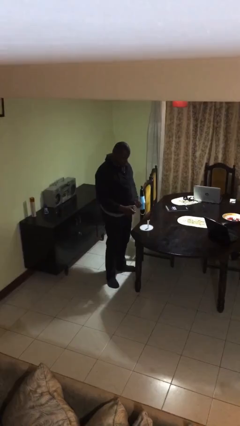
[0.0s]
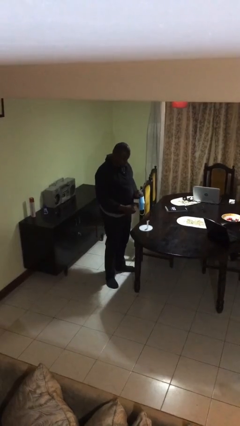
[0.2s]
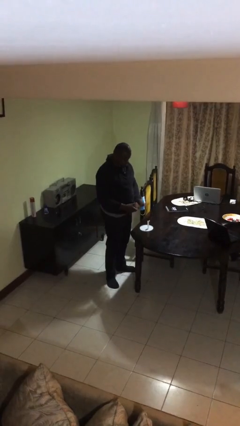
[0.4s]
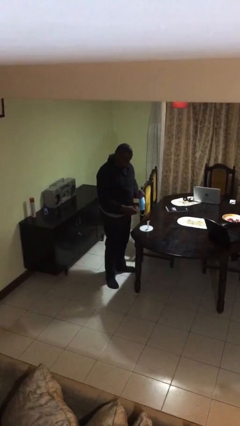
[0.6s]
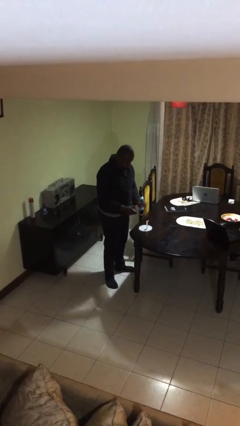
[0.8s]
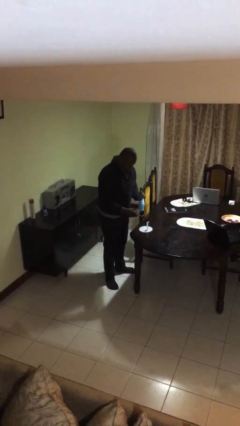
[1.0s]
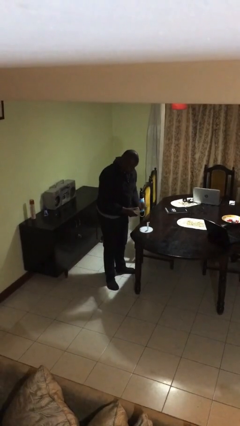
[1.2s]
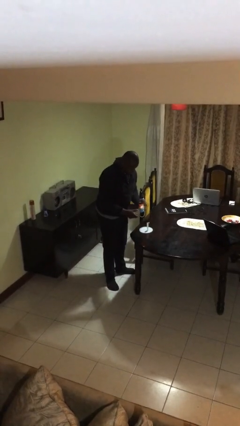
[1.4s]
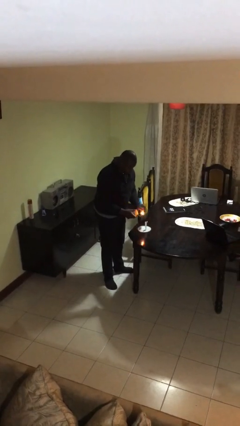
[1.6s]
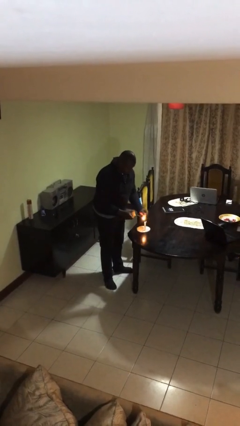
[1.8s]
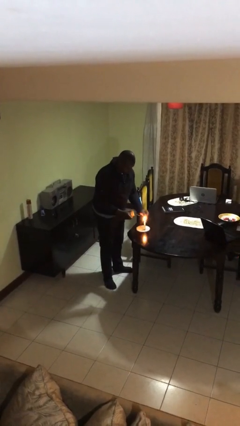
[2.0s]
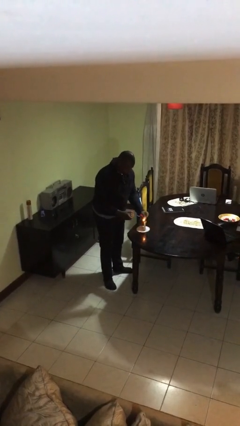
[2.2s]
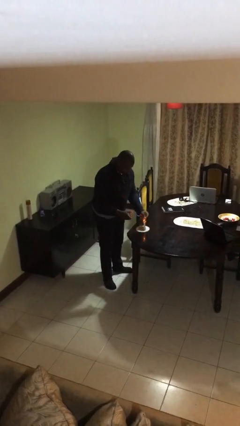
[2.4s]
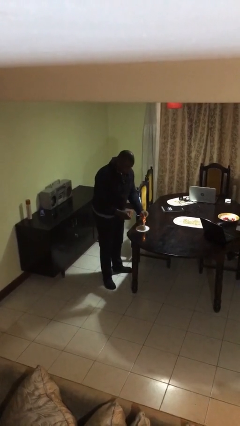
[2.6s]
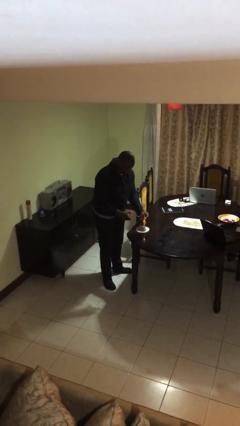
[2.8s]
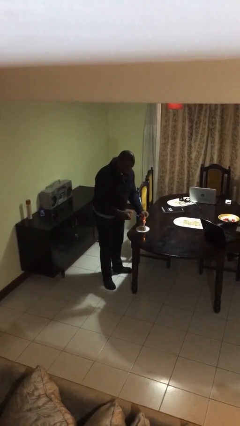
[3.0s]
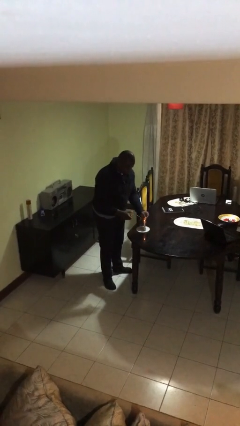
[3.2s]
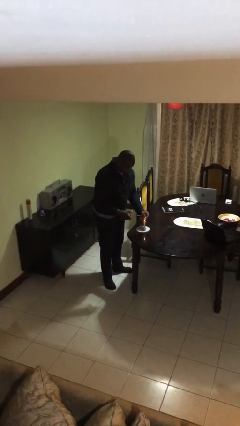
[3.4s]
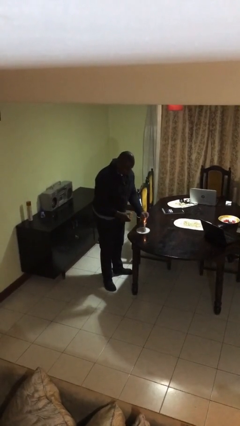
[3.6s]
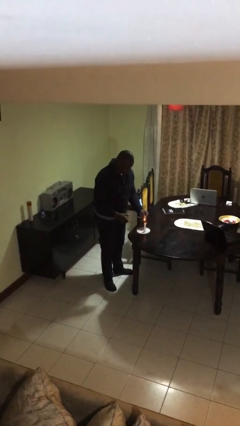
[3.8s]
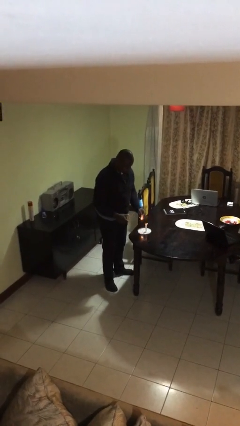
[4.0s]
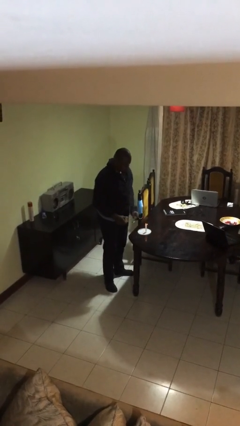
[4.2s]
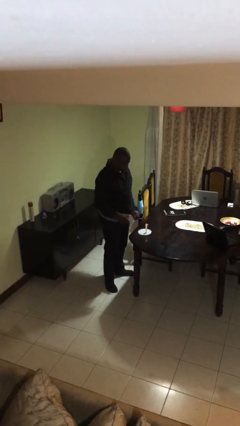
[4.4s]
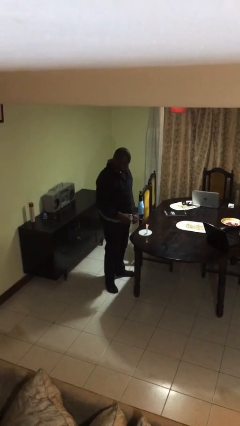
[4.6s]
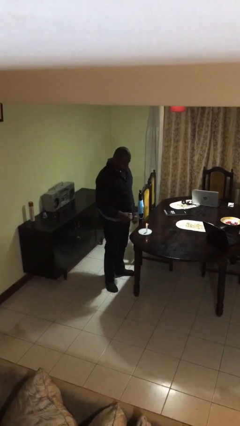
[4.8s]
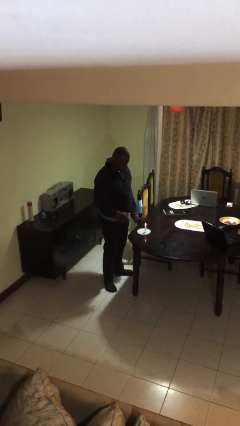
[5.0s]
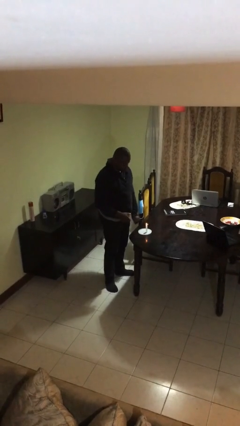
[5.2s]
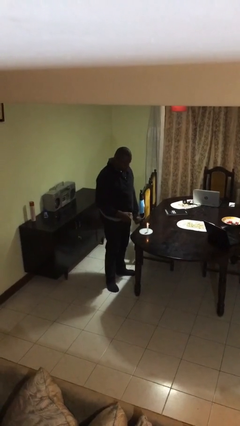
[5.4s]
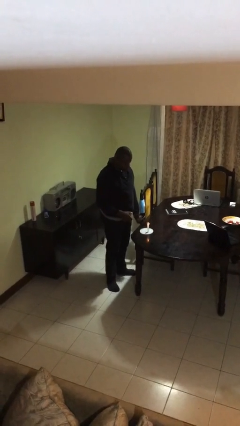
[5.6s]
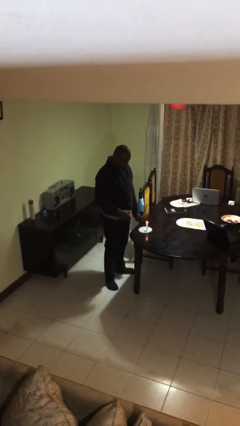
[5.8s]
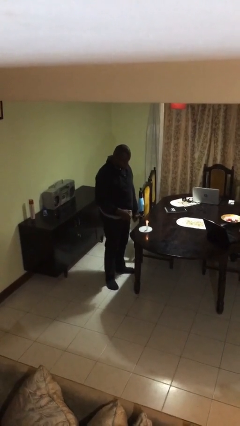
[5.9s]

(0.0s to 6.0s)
person lights candle

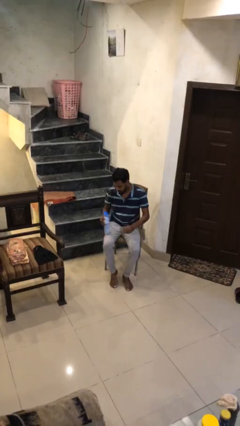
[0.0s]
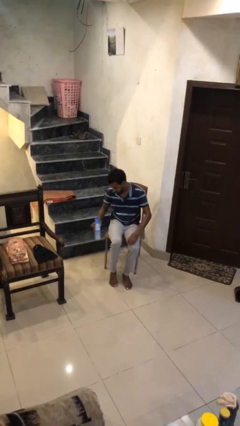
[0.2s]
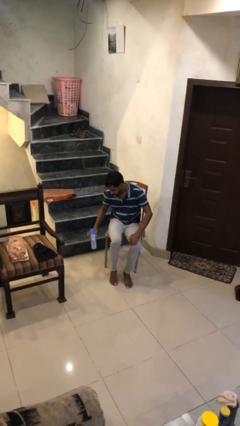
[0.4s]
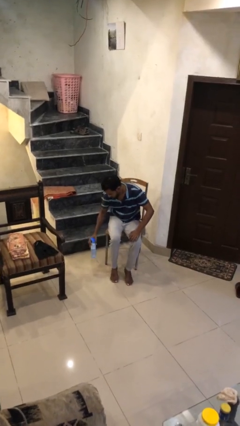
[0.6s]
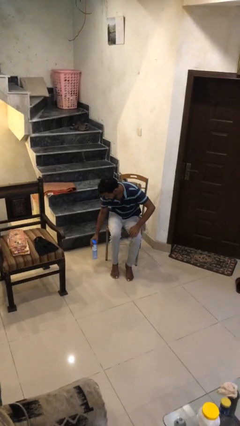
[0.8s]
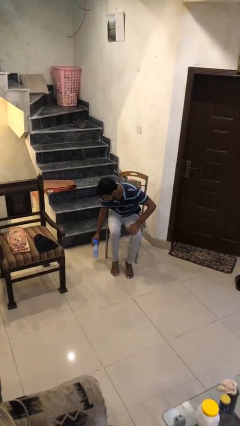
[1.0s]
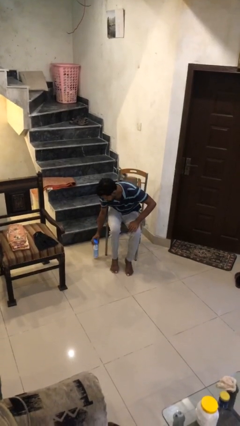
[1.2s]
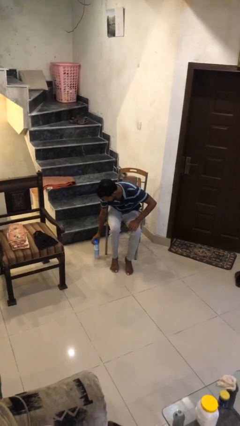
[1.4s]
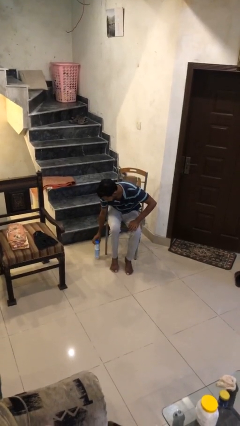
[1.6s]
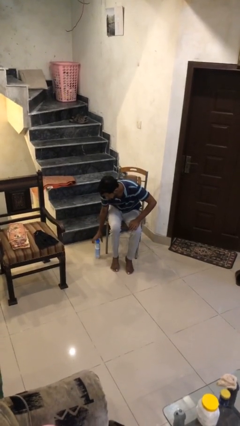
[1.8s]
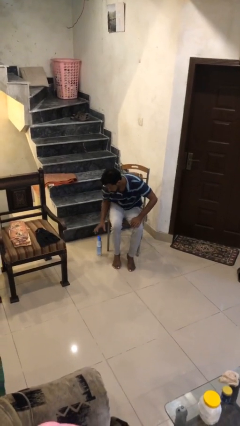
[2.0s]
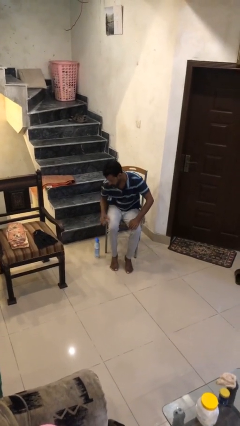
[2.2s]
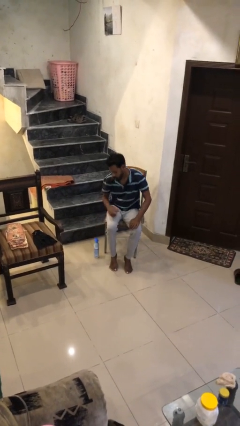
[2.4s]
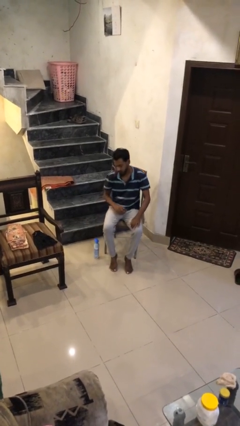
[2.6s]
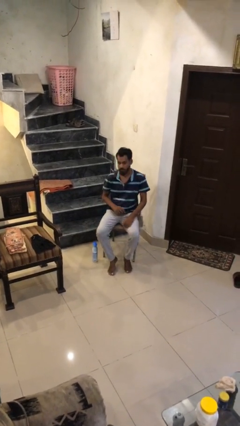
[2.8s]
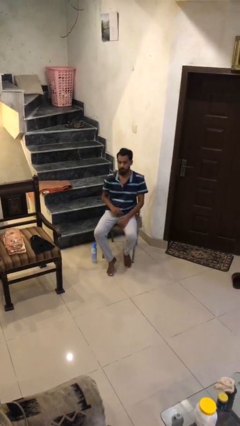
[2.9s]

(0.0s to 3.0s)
person puts down object on floor

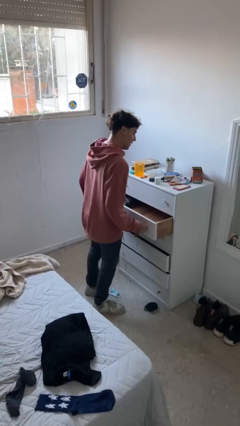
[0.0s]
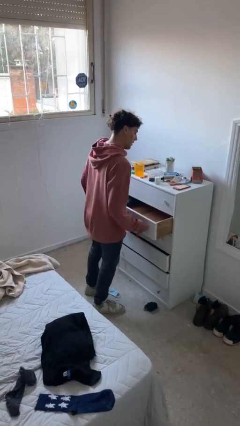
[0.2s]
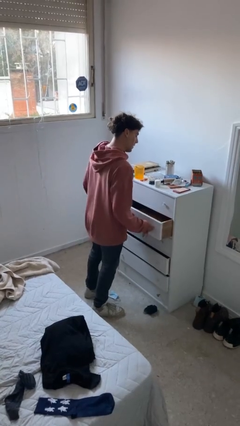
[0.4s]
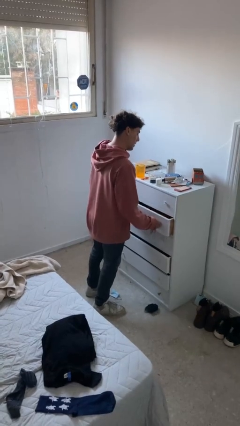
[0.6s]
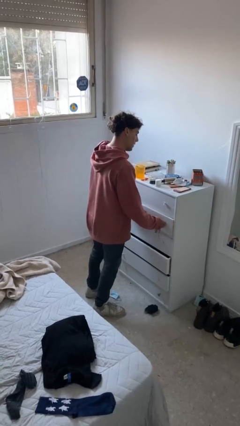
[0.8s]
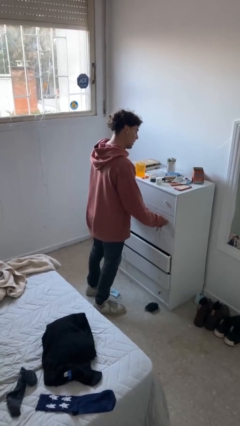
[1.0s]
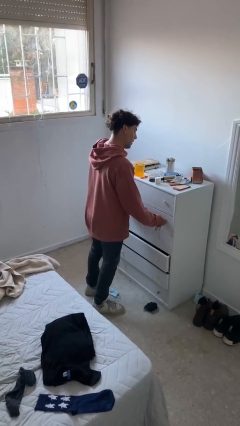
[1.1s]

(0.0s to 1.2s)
person closes dresser drawer

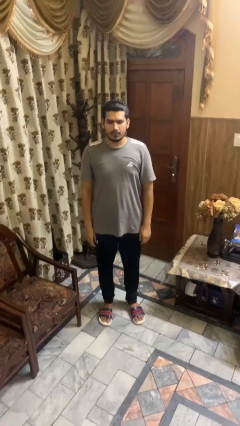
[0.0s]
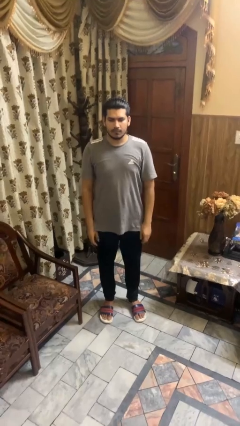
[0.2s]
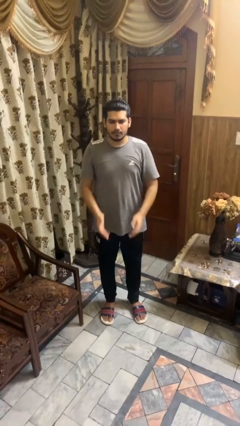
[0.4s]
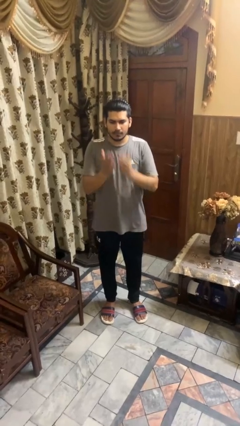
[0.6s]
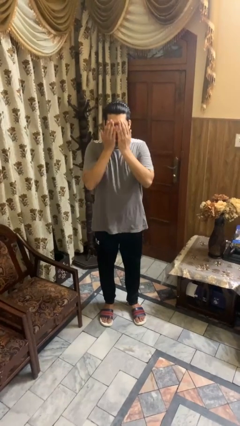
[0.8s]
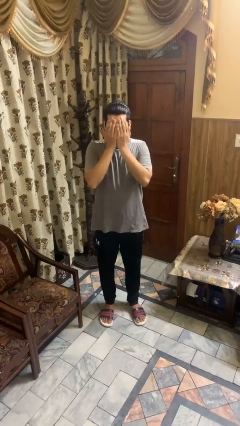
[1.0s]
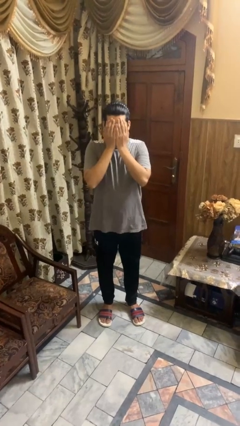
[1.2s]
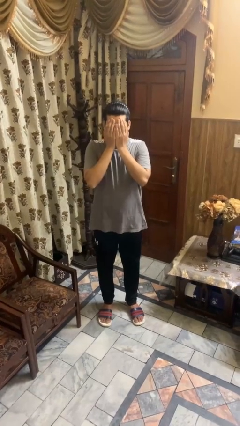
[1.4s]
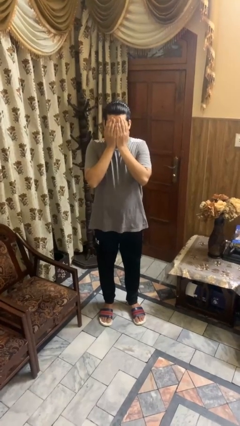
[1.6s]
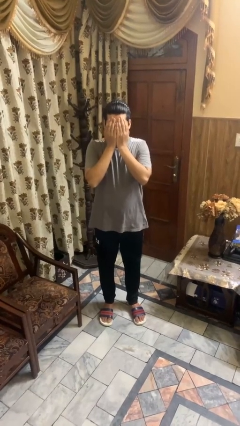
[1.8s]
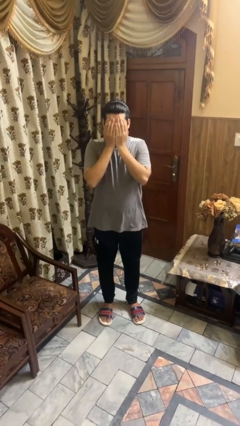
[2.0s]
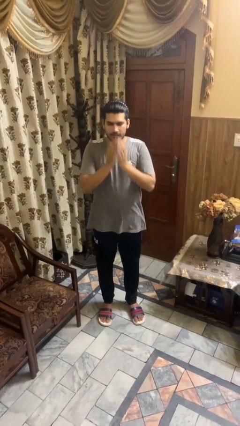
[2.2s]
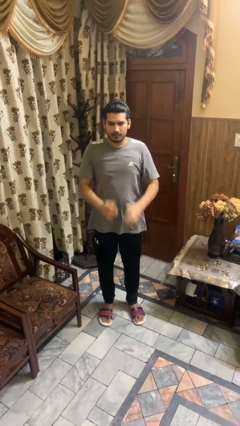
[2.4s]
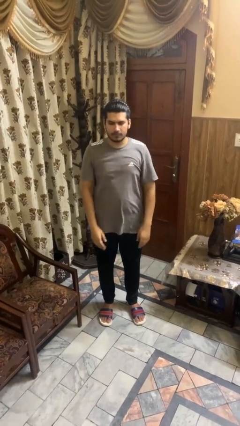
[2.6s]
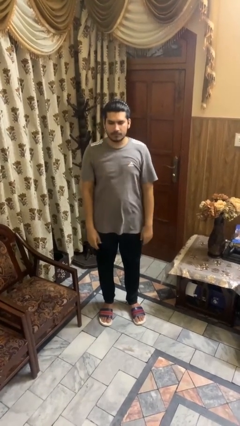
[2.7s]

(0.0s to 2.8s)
person covers face with hands

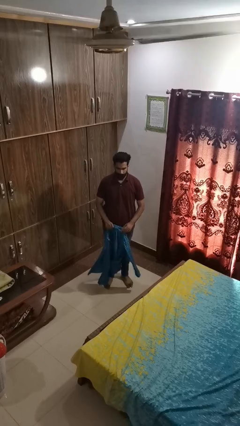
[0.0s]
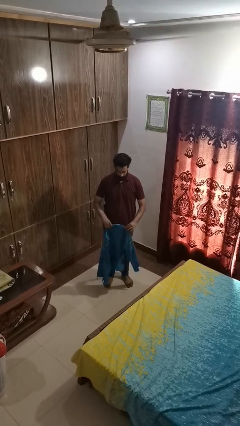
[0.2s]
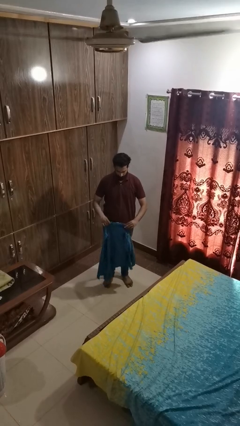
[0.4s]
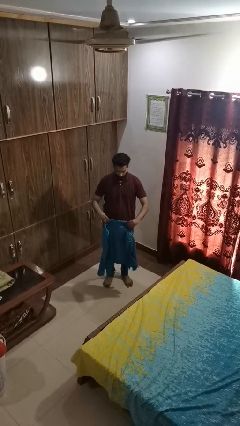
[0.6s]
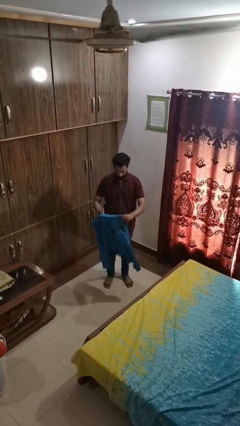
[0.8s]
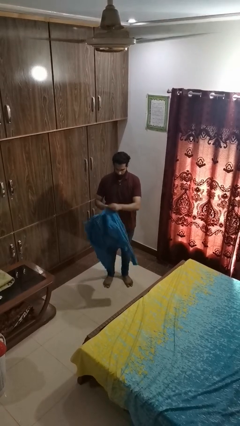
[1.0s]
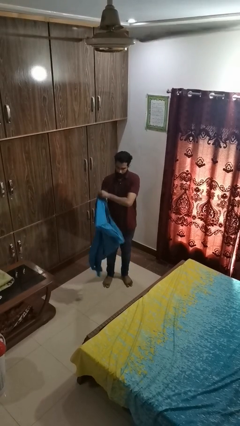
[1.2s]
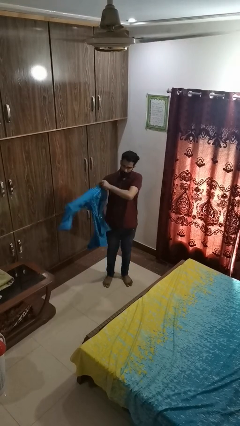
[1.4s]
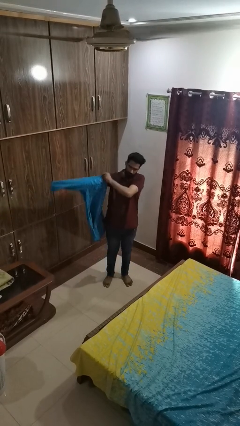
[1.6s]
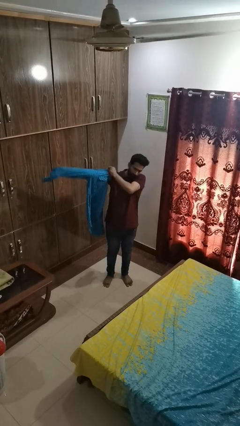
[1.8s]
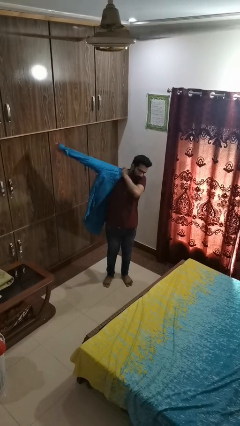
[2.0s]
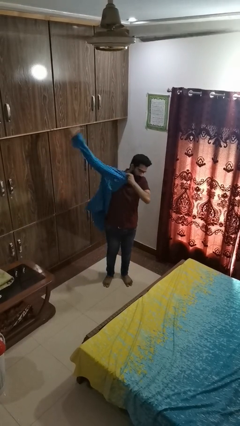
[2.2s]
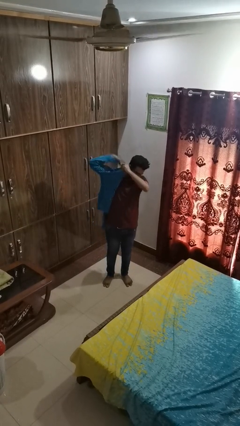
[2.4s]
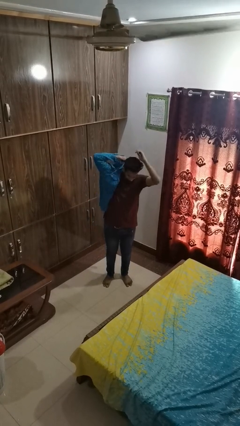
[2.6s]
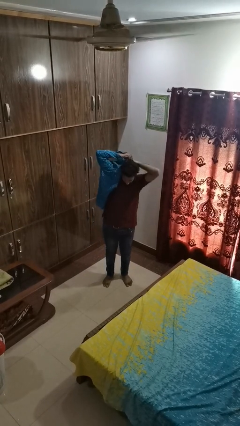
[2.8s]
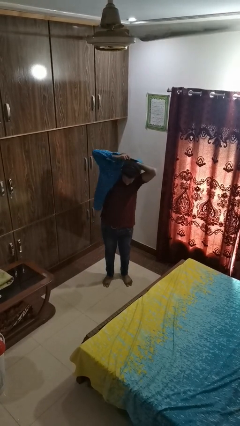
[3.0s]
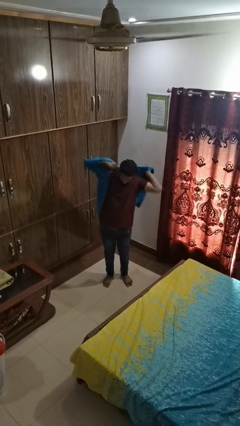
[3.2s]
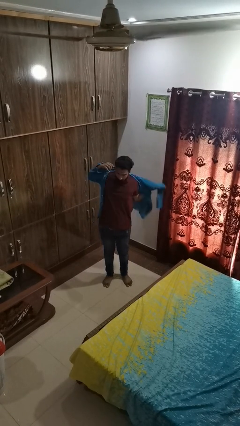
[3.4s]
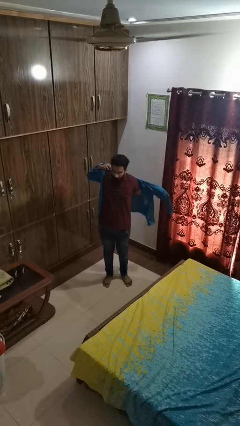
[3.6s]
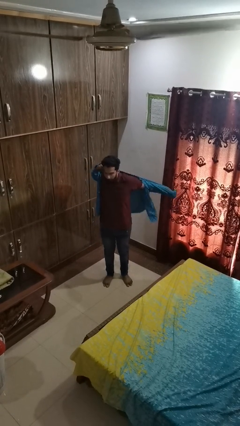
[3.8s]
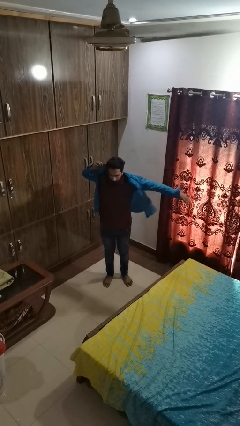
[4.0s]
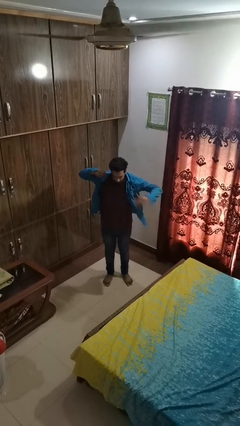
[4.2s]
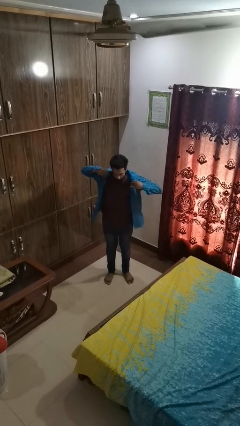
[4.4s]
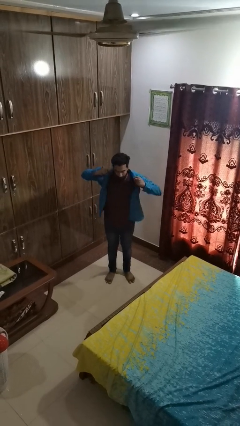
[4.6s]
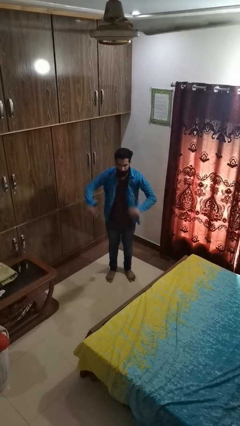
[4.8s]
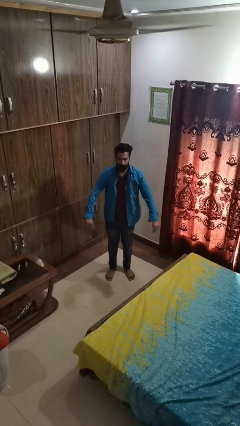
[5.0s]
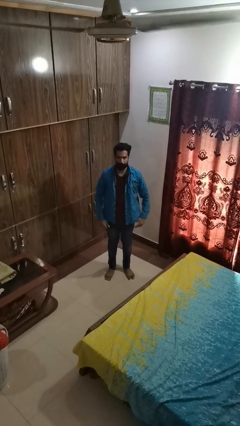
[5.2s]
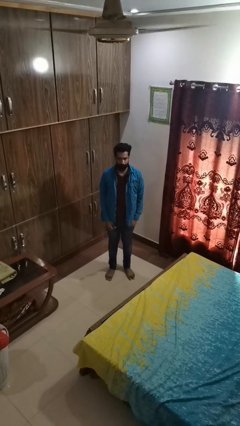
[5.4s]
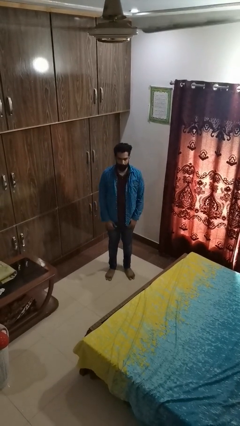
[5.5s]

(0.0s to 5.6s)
person puts on shirt
